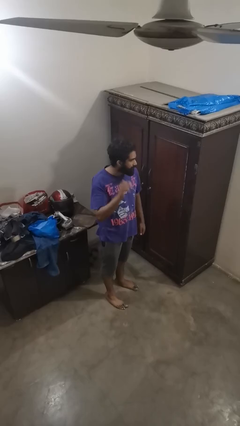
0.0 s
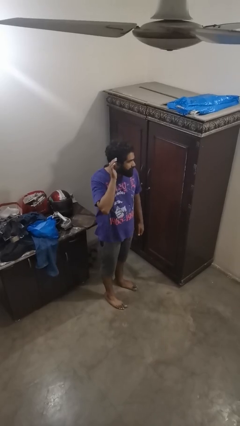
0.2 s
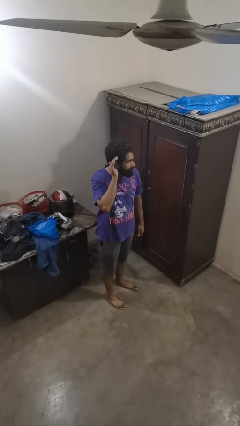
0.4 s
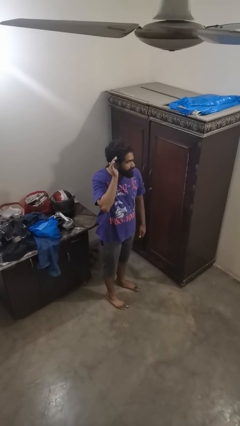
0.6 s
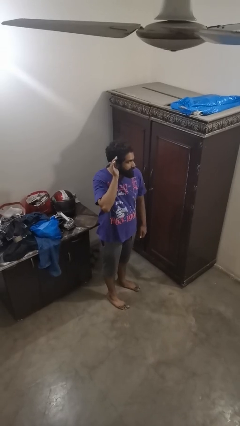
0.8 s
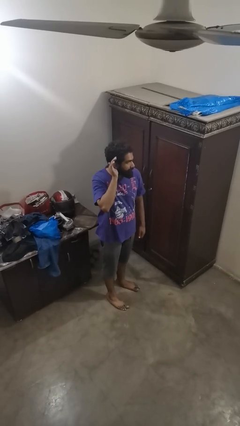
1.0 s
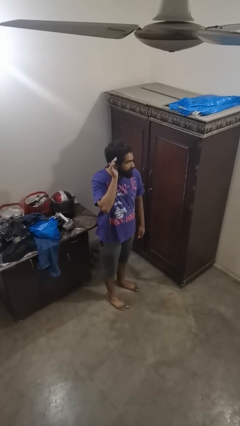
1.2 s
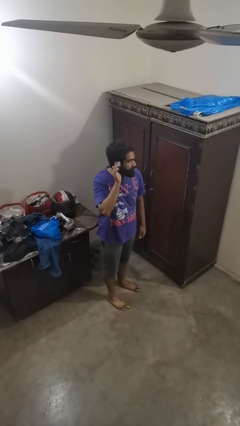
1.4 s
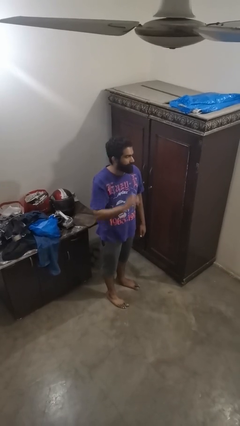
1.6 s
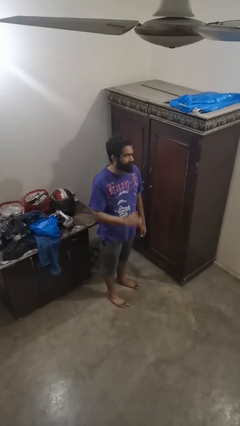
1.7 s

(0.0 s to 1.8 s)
person gestures listen closely

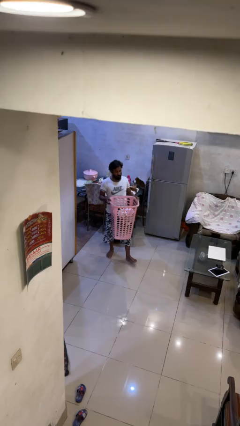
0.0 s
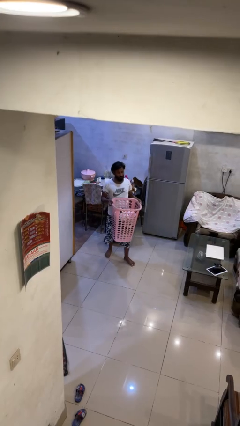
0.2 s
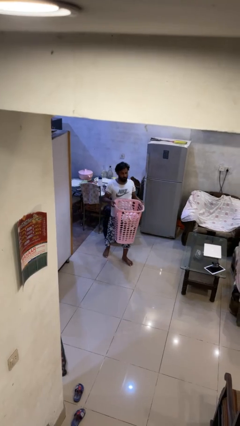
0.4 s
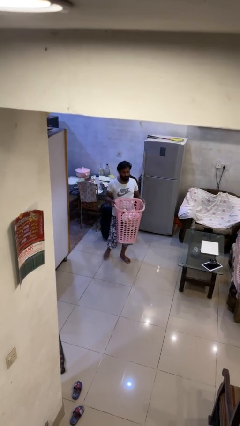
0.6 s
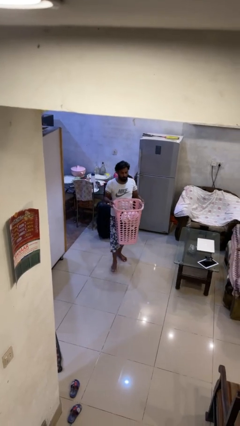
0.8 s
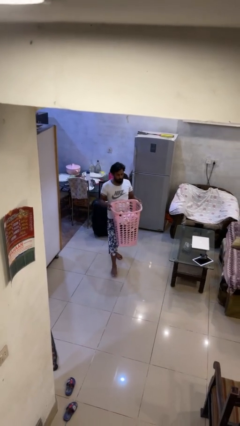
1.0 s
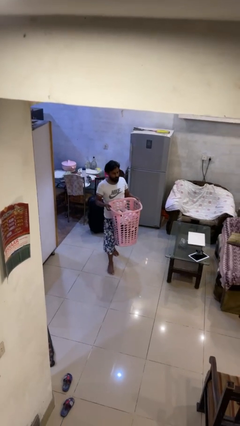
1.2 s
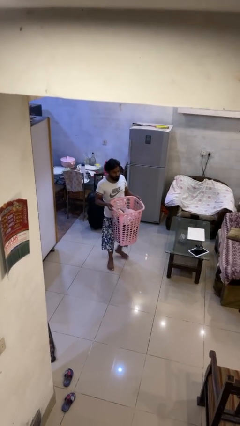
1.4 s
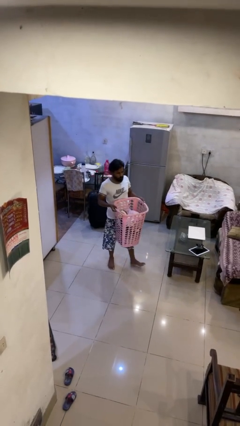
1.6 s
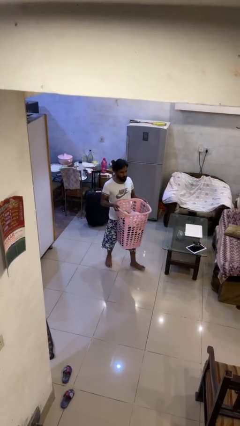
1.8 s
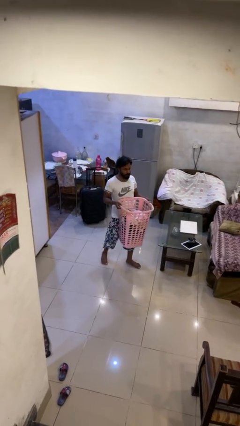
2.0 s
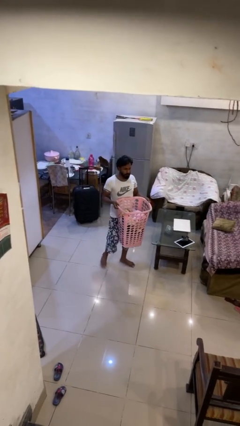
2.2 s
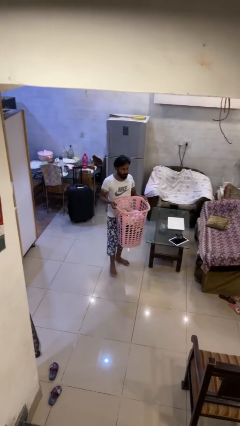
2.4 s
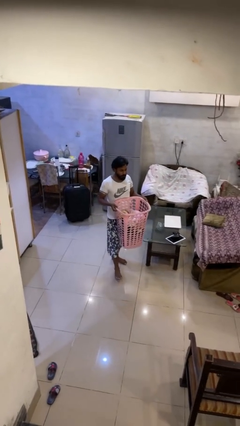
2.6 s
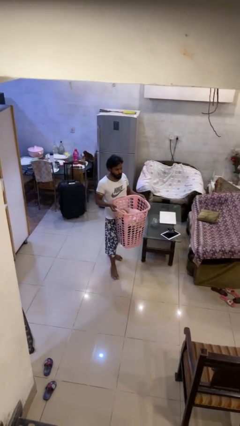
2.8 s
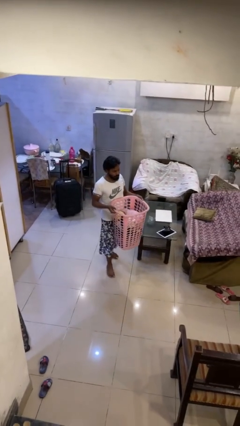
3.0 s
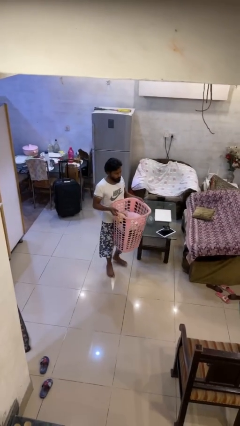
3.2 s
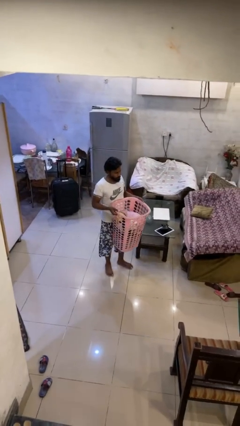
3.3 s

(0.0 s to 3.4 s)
person carries laundry basket

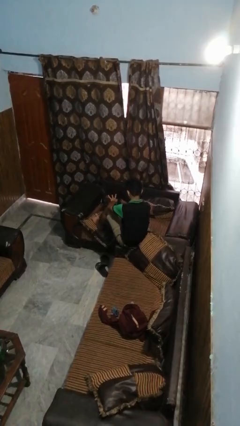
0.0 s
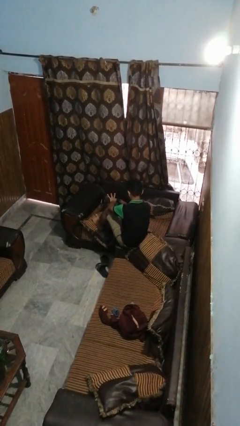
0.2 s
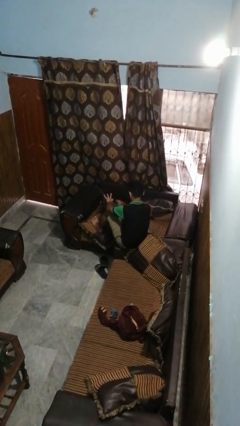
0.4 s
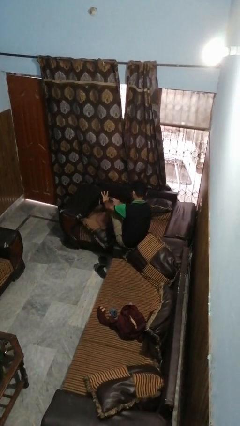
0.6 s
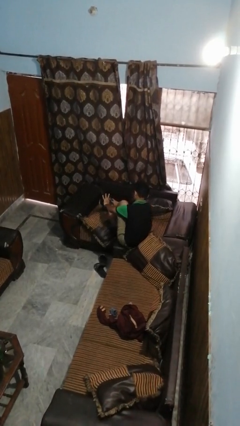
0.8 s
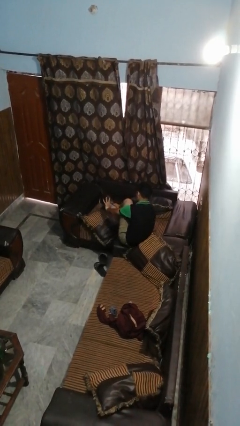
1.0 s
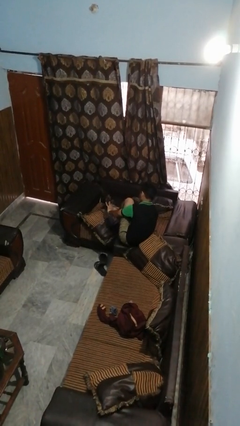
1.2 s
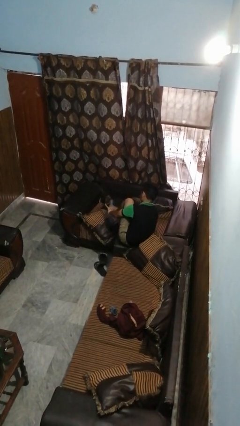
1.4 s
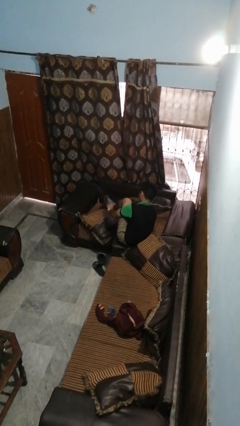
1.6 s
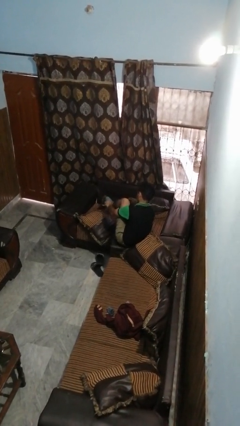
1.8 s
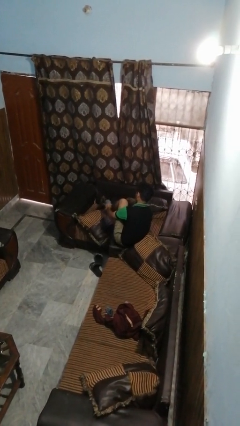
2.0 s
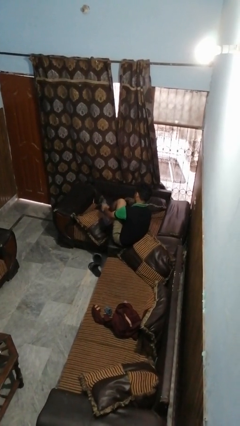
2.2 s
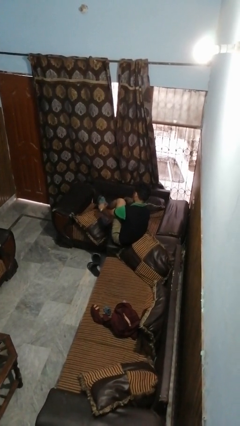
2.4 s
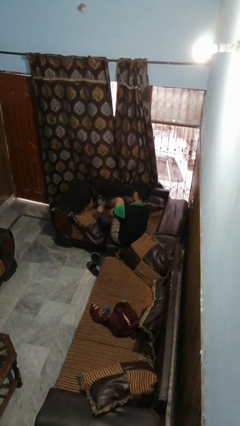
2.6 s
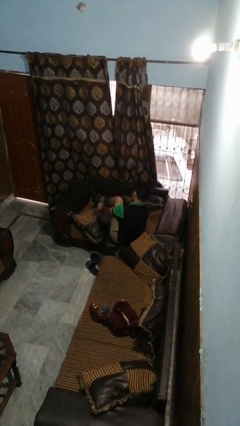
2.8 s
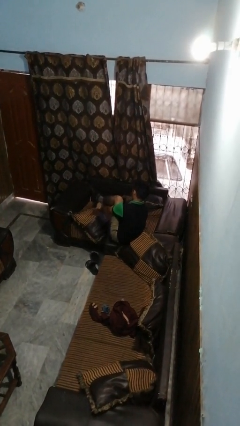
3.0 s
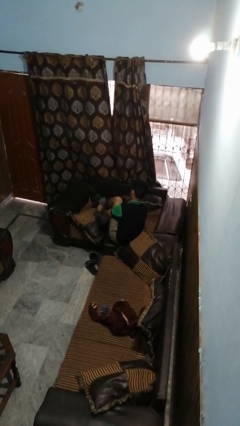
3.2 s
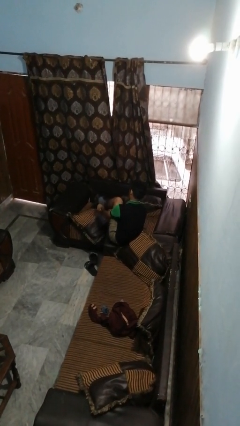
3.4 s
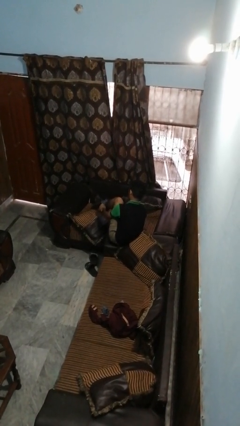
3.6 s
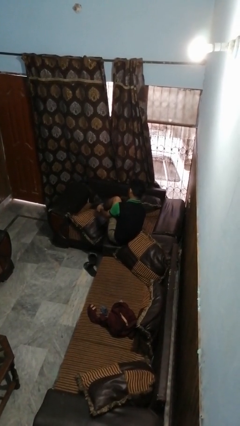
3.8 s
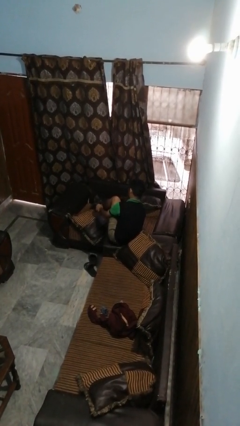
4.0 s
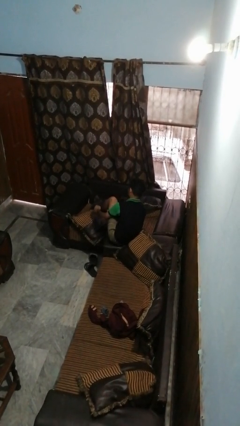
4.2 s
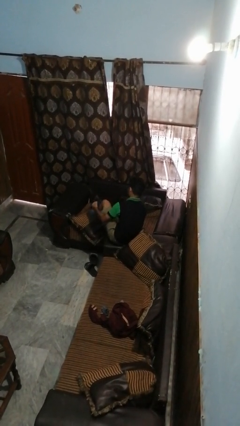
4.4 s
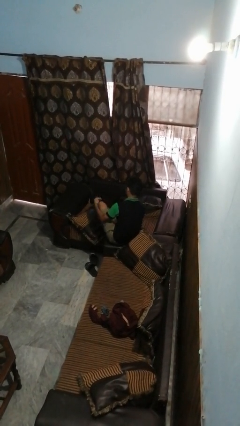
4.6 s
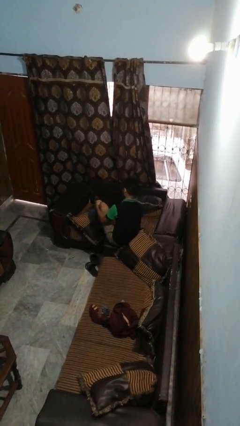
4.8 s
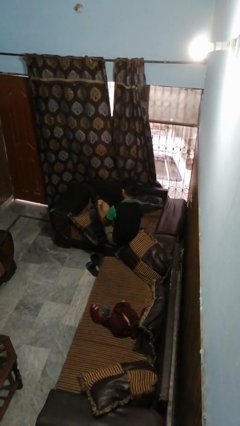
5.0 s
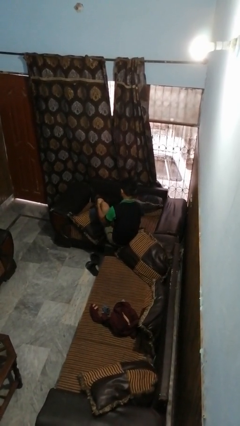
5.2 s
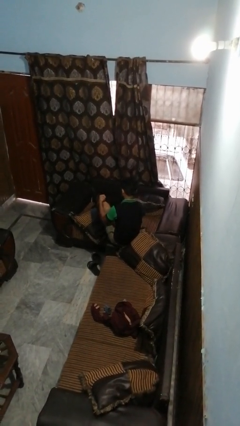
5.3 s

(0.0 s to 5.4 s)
person puts on socks

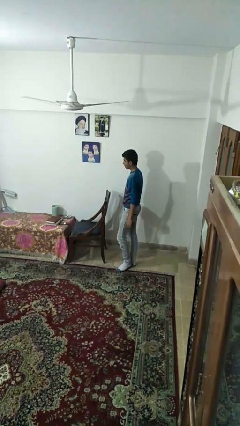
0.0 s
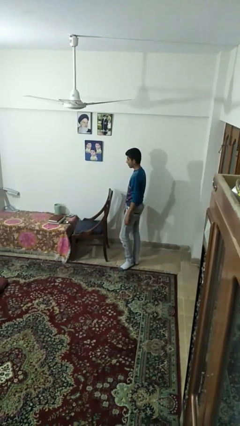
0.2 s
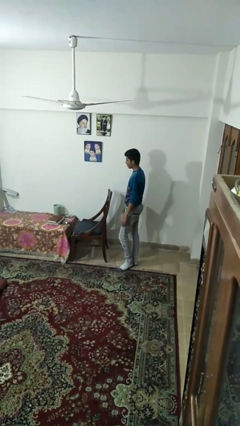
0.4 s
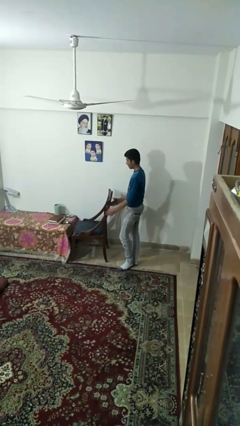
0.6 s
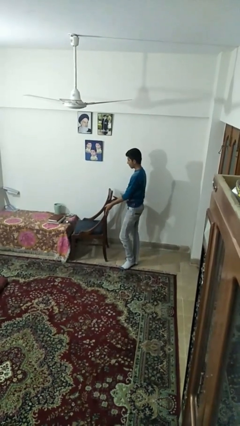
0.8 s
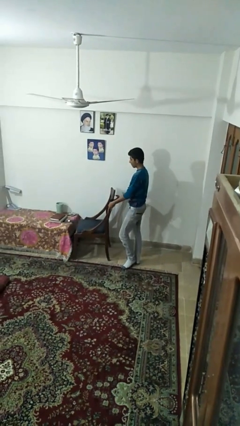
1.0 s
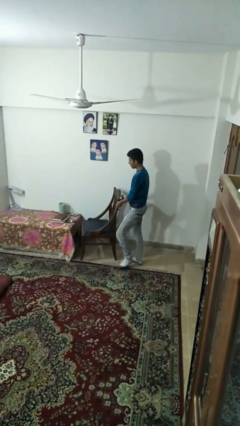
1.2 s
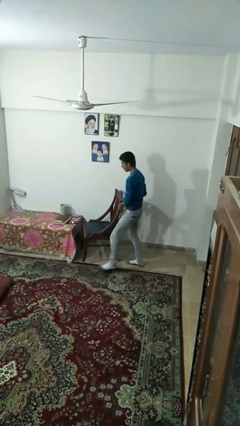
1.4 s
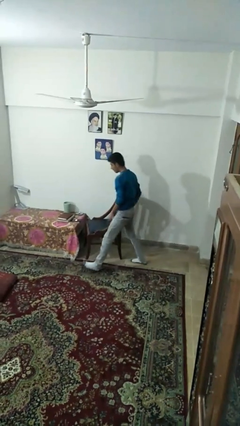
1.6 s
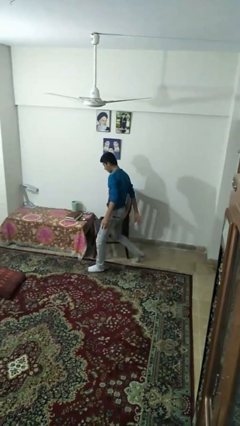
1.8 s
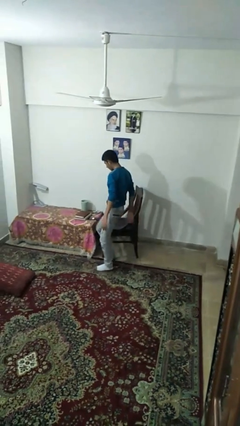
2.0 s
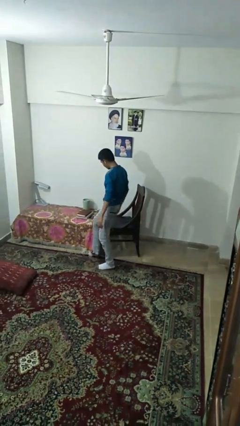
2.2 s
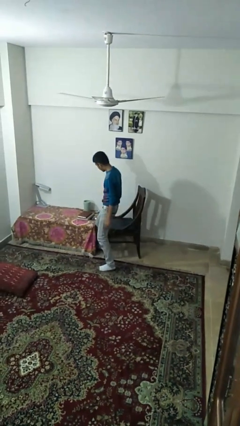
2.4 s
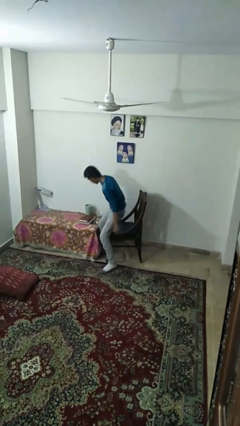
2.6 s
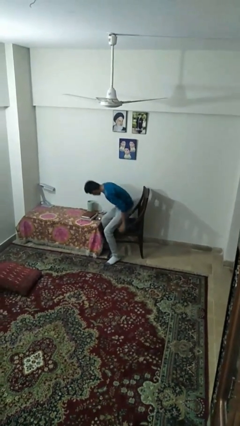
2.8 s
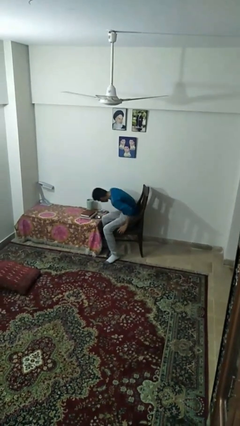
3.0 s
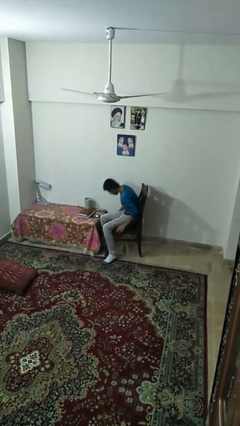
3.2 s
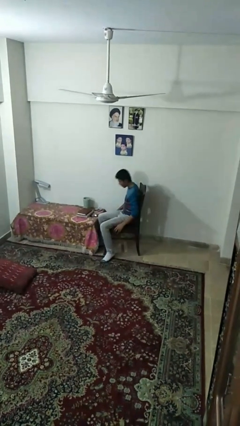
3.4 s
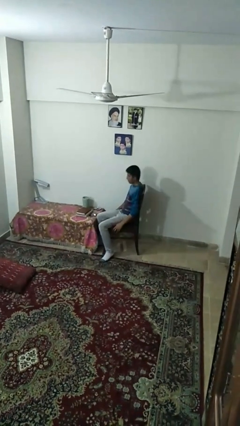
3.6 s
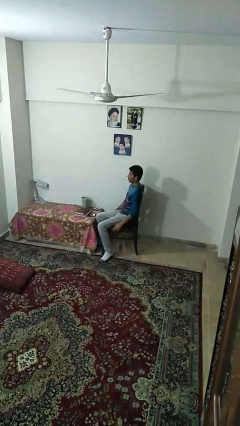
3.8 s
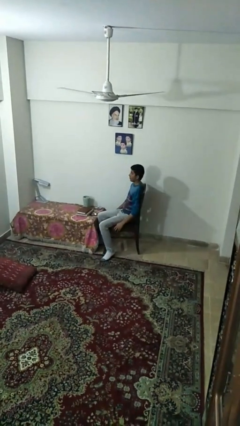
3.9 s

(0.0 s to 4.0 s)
person sits down

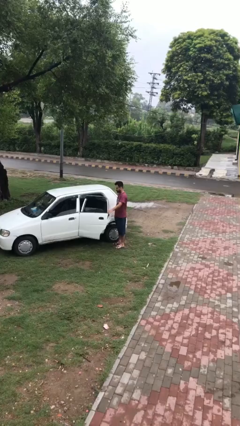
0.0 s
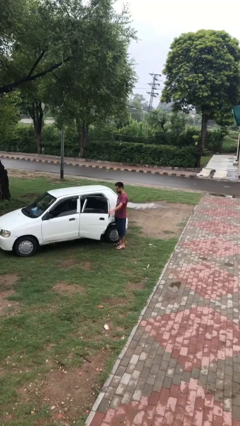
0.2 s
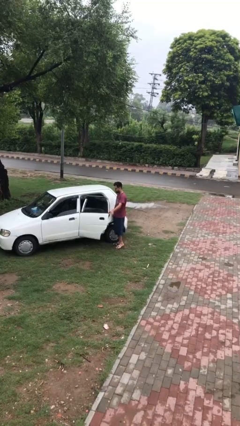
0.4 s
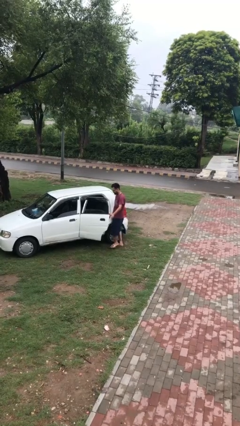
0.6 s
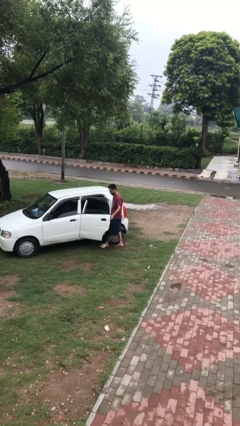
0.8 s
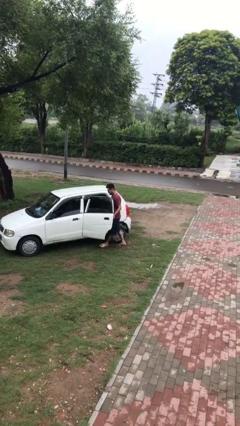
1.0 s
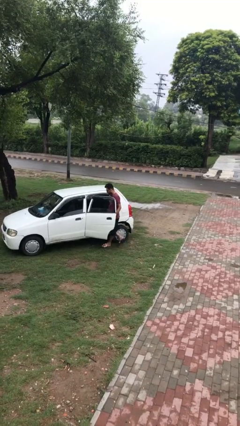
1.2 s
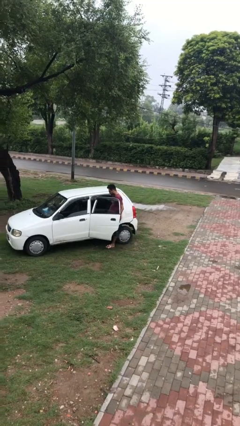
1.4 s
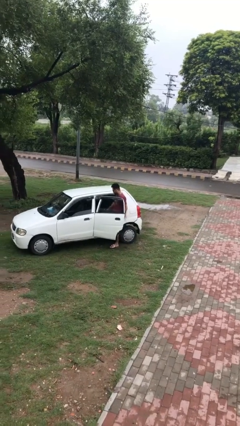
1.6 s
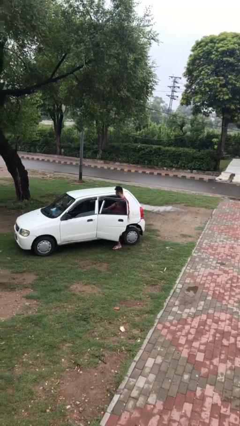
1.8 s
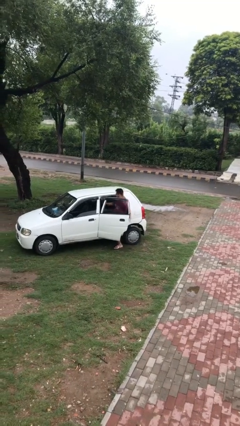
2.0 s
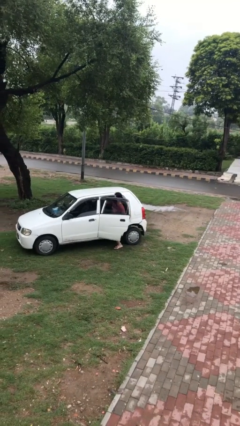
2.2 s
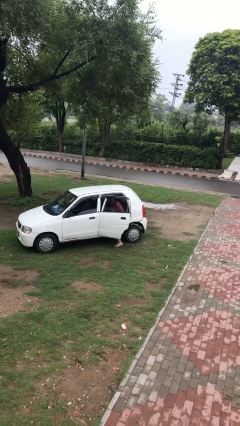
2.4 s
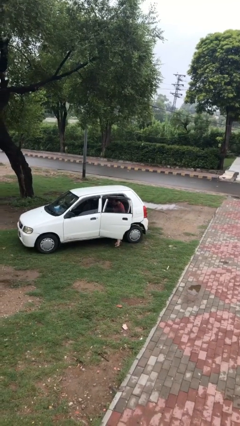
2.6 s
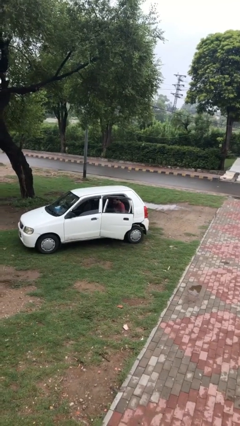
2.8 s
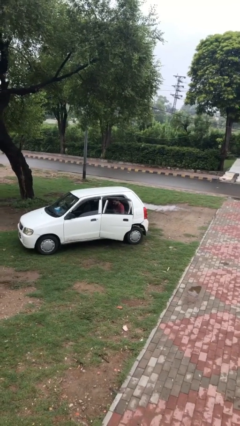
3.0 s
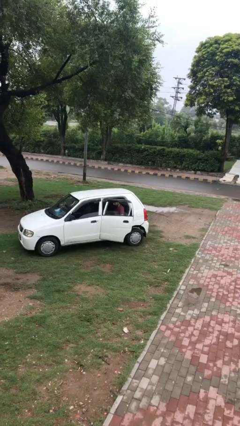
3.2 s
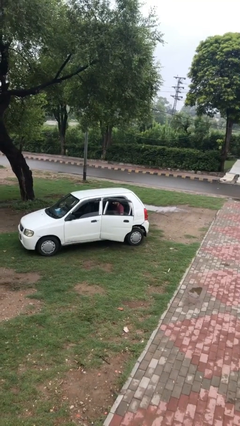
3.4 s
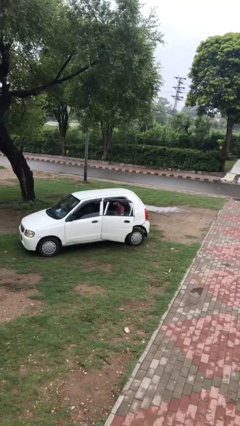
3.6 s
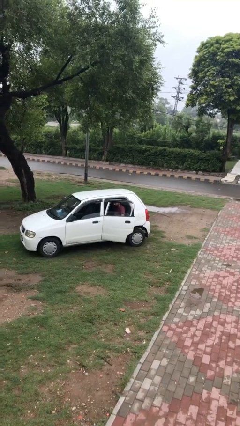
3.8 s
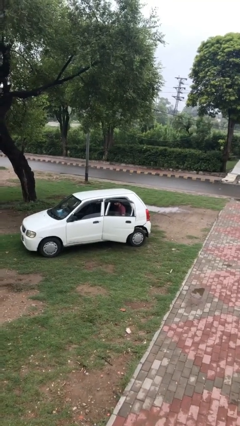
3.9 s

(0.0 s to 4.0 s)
person enters car
